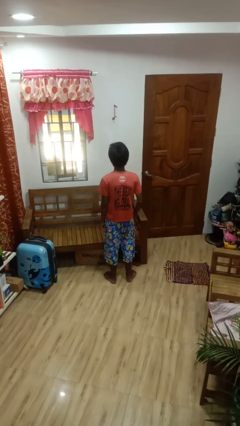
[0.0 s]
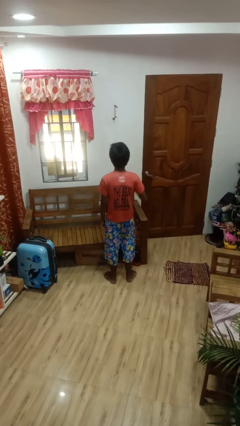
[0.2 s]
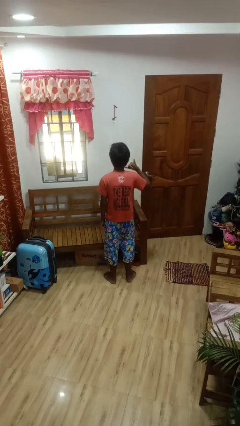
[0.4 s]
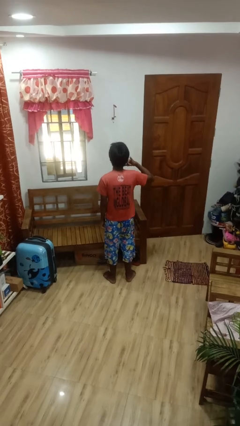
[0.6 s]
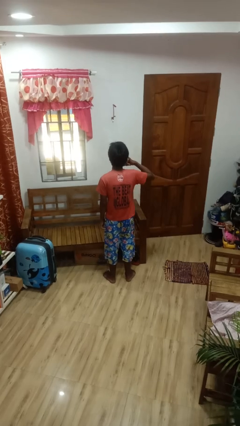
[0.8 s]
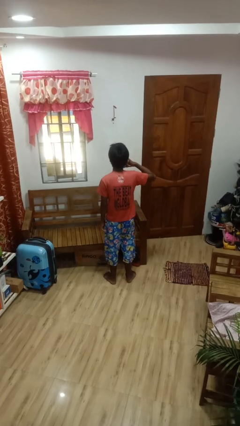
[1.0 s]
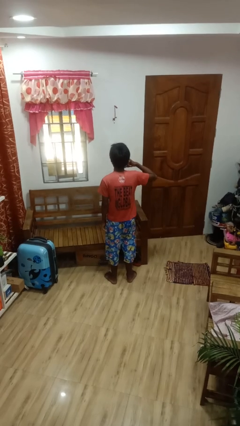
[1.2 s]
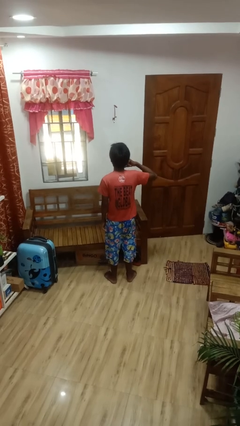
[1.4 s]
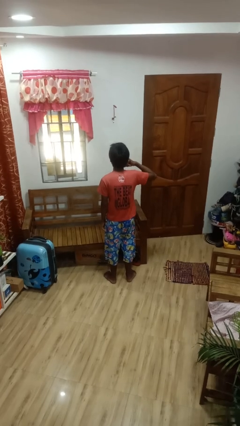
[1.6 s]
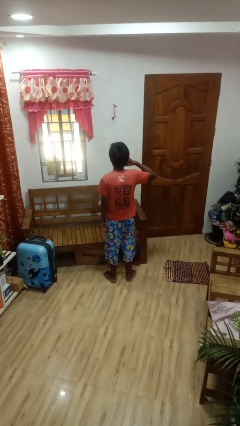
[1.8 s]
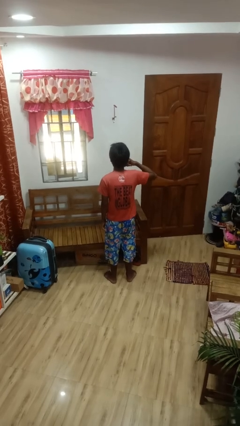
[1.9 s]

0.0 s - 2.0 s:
person gestures call me

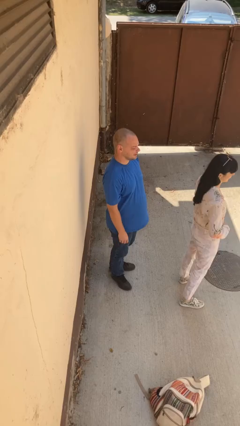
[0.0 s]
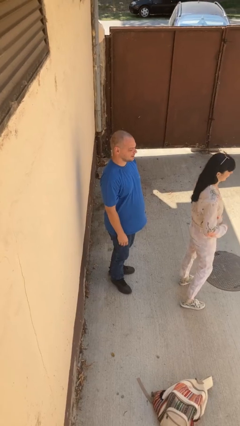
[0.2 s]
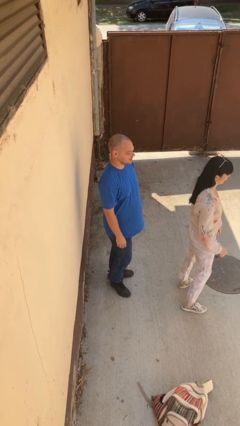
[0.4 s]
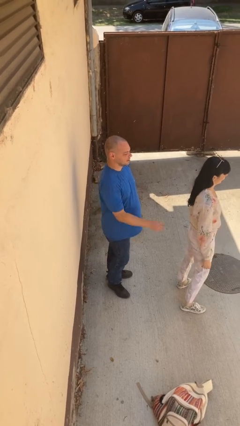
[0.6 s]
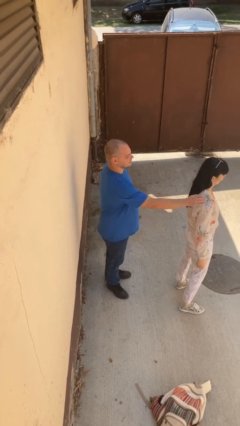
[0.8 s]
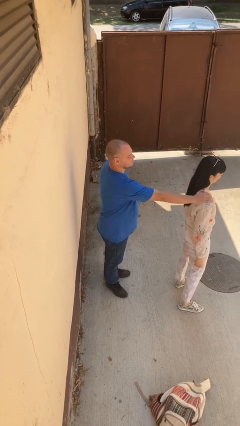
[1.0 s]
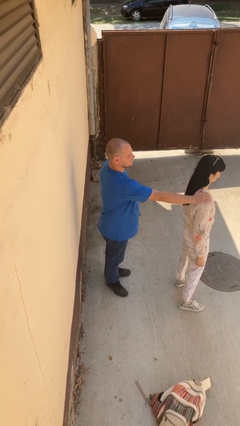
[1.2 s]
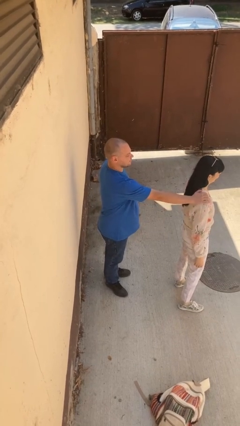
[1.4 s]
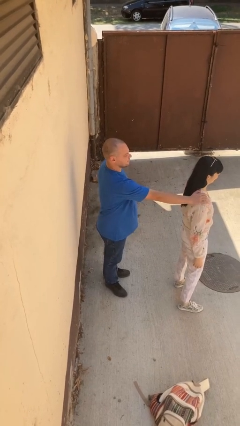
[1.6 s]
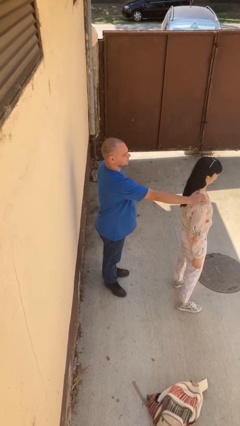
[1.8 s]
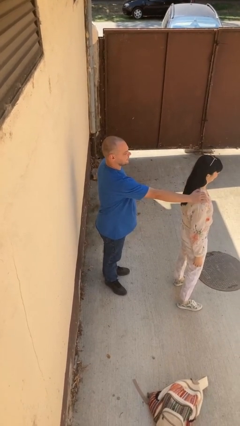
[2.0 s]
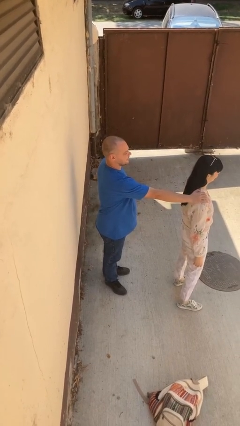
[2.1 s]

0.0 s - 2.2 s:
person grabs person by shoulder

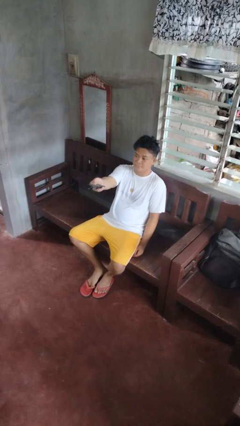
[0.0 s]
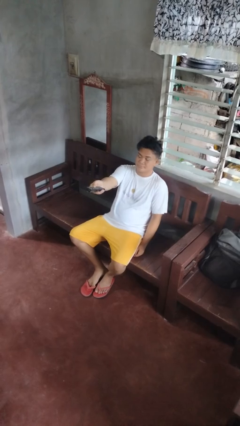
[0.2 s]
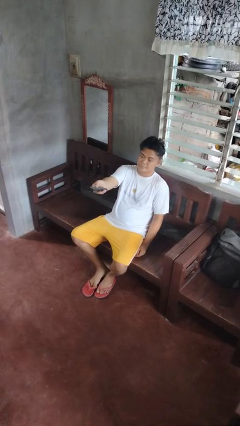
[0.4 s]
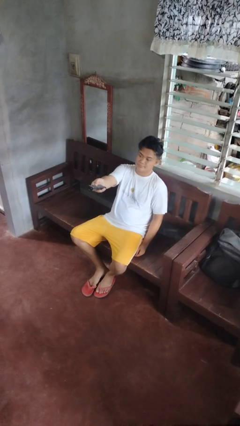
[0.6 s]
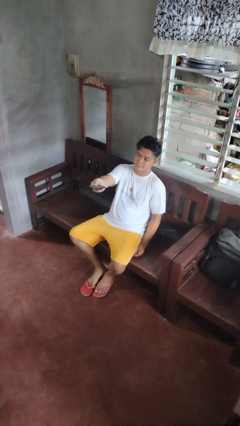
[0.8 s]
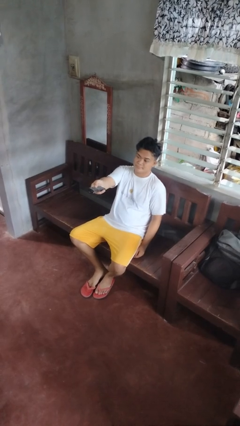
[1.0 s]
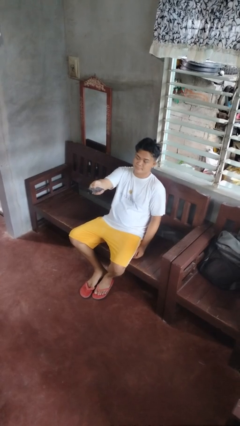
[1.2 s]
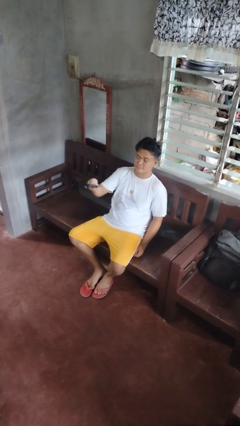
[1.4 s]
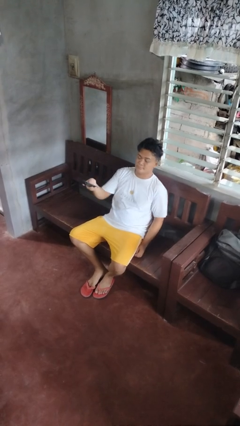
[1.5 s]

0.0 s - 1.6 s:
person uses television remote

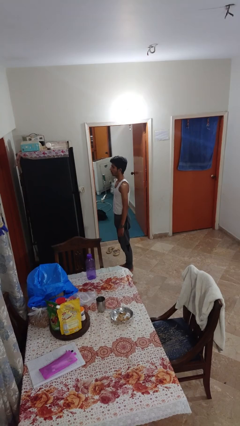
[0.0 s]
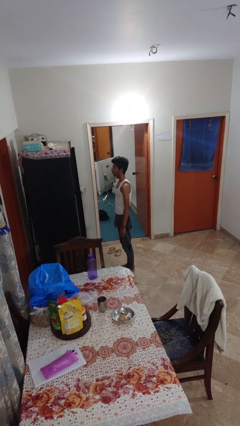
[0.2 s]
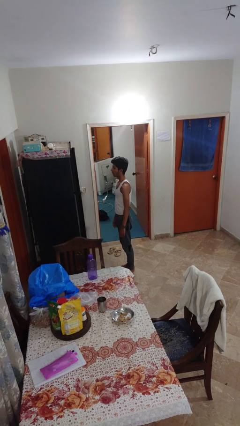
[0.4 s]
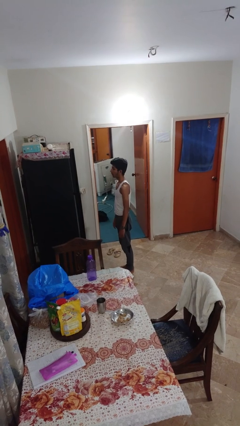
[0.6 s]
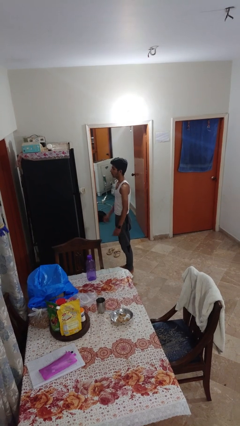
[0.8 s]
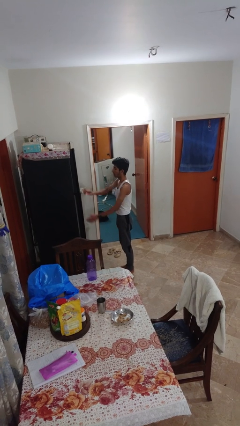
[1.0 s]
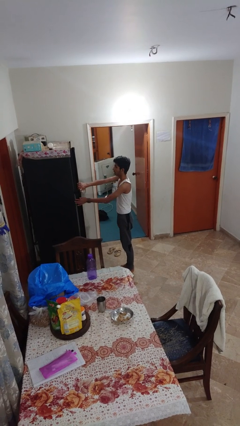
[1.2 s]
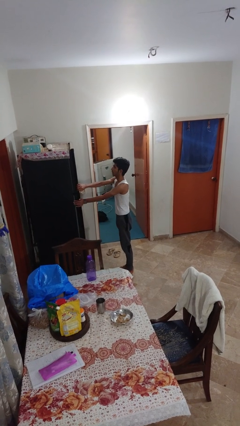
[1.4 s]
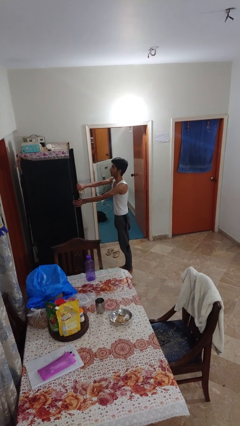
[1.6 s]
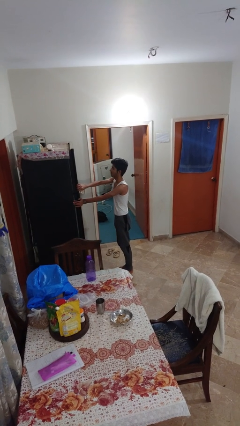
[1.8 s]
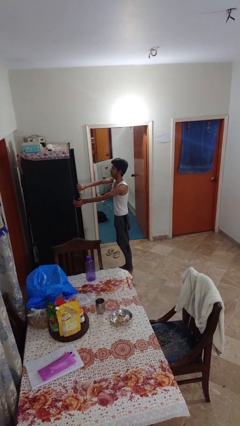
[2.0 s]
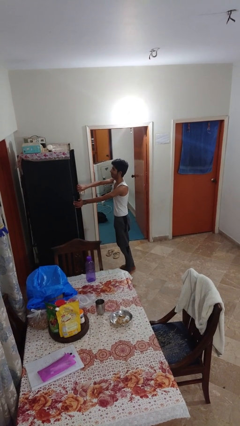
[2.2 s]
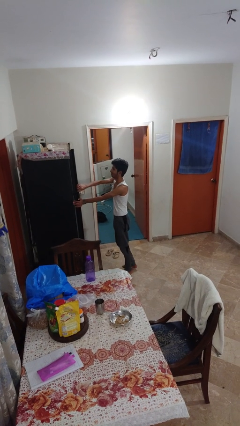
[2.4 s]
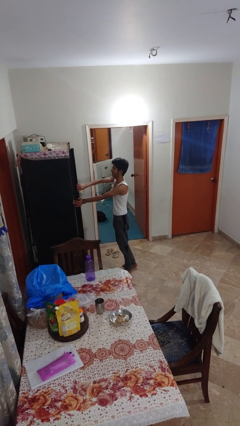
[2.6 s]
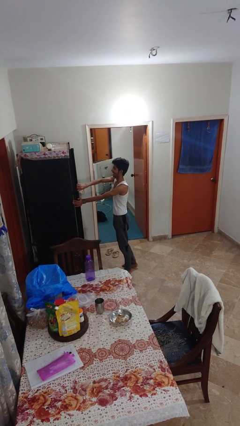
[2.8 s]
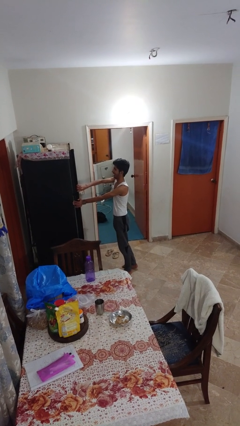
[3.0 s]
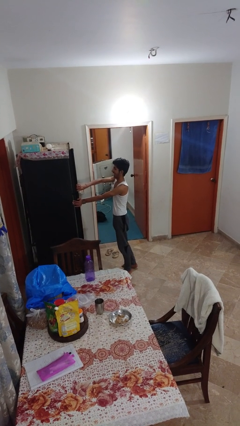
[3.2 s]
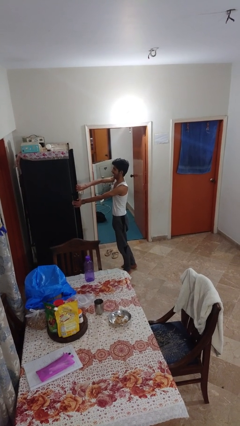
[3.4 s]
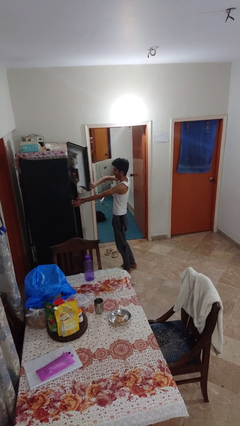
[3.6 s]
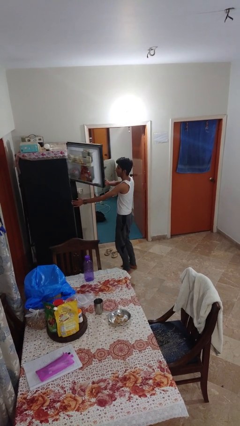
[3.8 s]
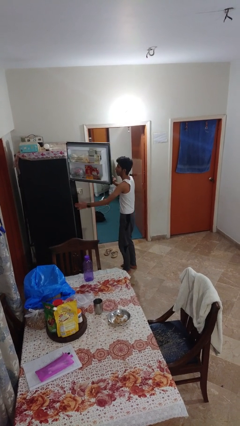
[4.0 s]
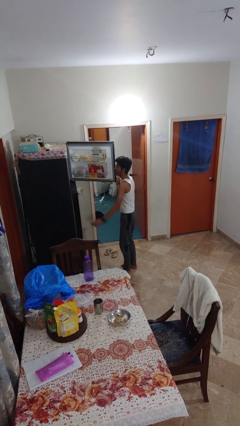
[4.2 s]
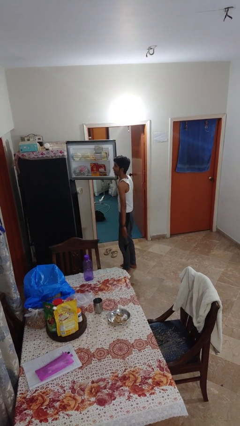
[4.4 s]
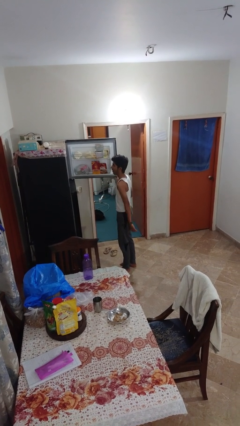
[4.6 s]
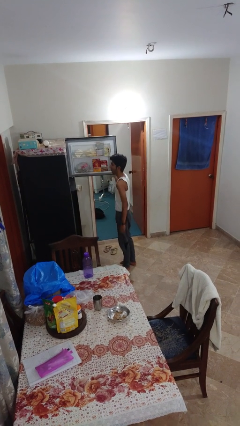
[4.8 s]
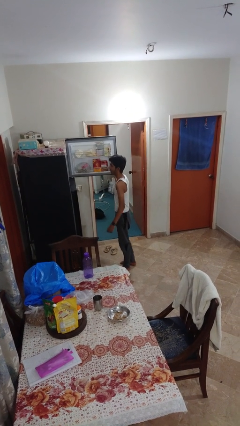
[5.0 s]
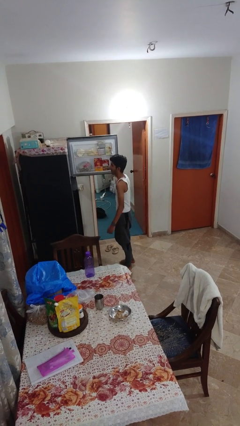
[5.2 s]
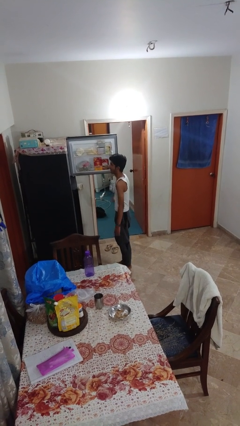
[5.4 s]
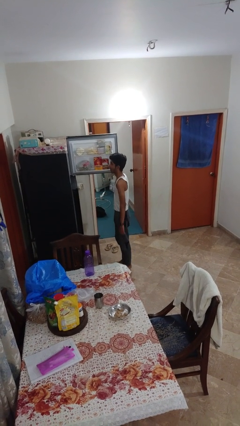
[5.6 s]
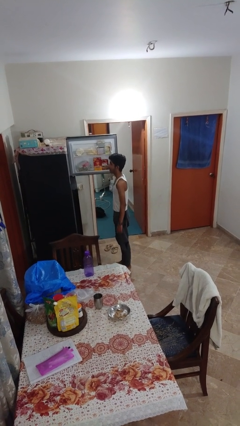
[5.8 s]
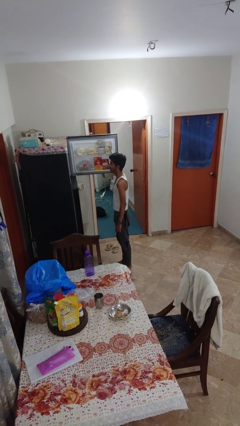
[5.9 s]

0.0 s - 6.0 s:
person opens refrigerator

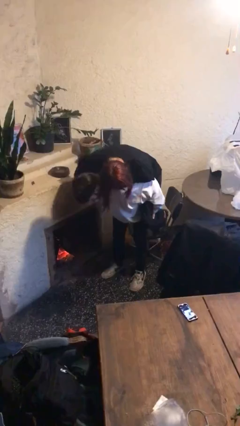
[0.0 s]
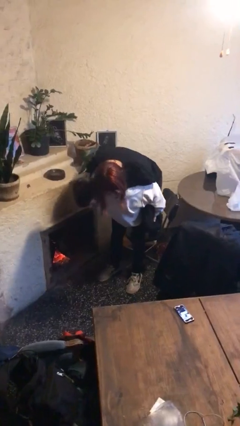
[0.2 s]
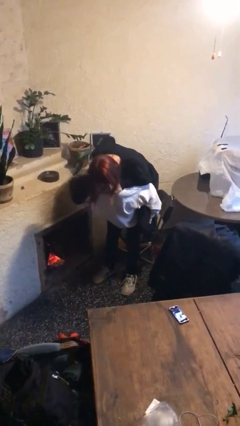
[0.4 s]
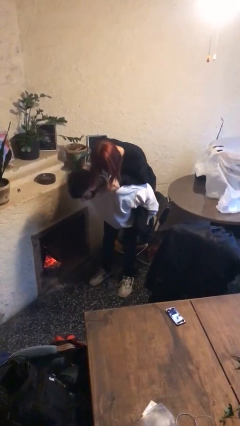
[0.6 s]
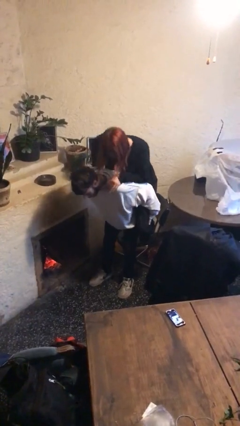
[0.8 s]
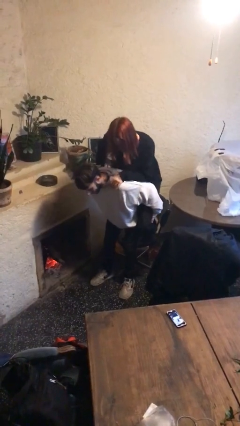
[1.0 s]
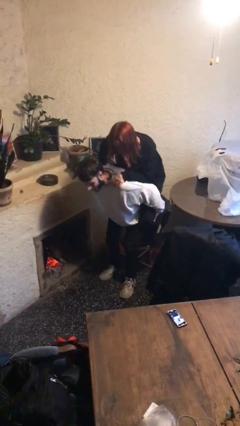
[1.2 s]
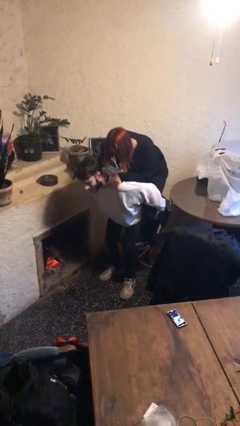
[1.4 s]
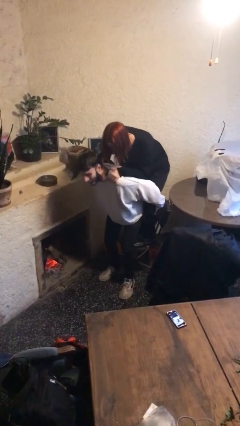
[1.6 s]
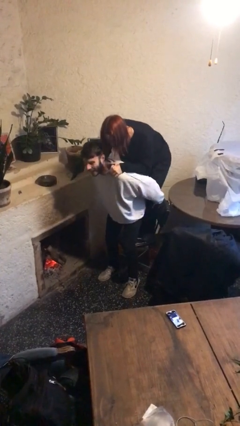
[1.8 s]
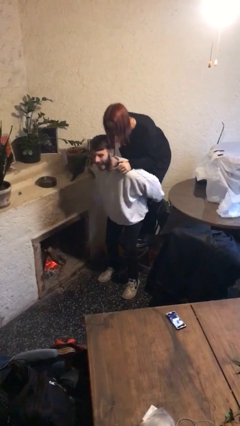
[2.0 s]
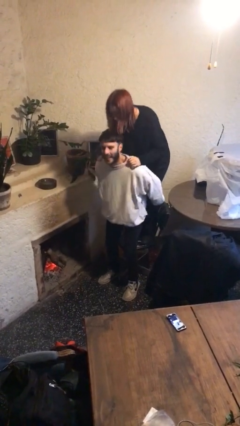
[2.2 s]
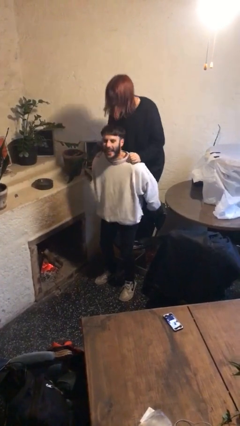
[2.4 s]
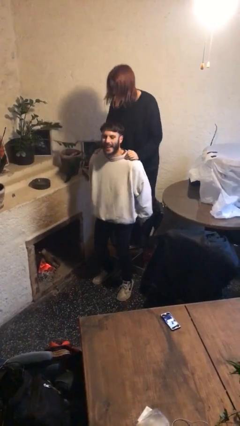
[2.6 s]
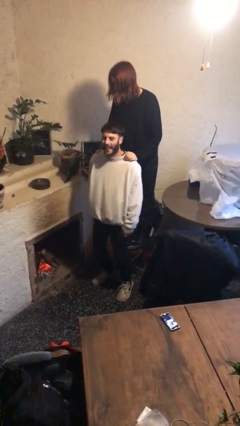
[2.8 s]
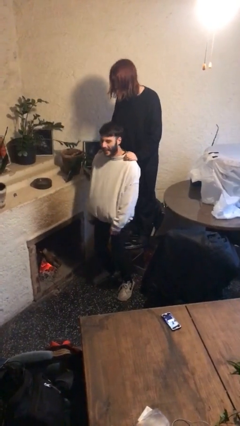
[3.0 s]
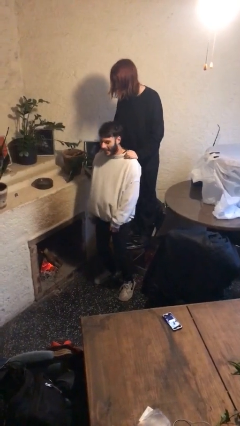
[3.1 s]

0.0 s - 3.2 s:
person puts down person

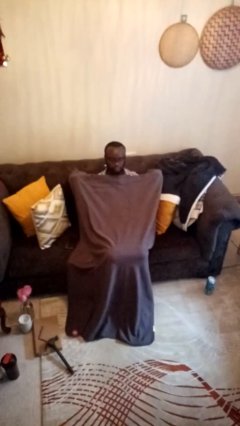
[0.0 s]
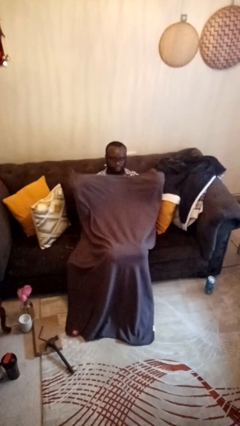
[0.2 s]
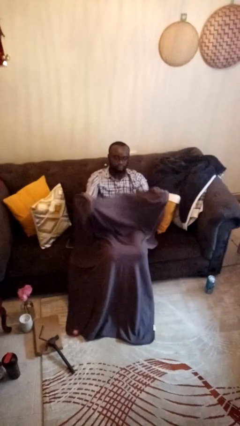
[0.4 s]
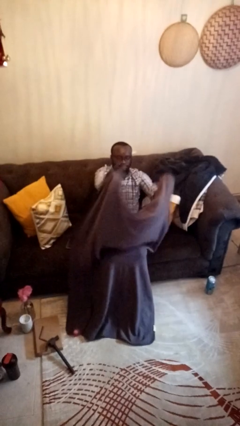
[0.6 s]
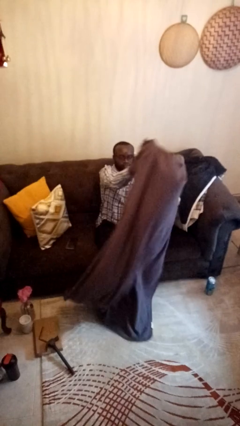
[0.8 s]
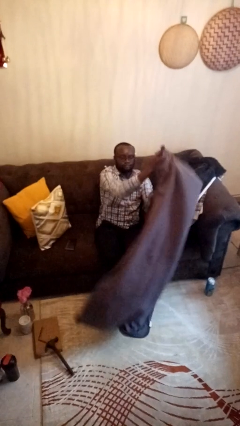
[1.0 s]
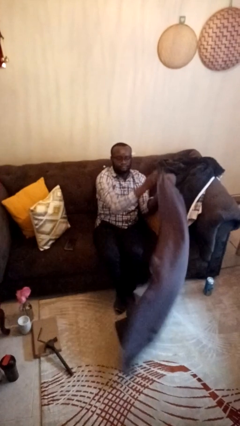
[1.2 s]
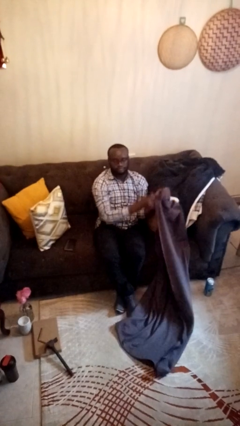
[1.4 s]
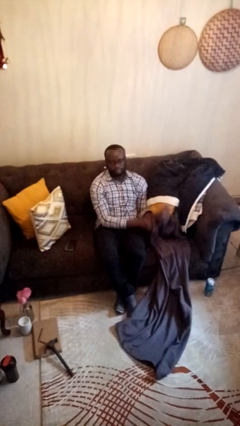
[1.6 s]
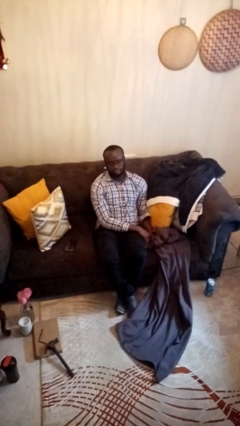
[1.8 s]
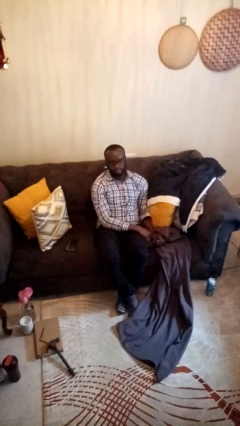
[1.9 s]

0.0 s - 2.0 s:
person uncovers with blanket

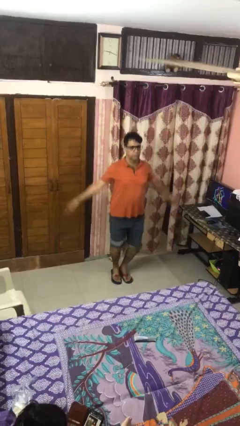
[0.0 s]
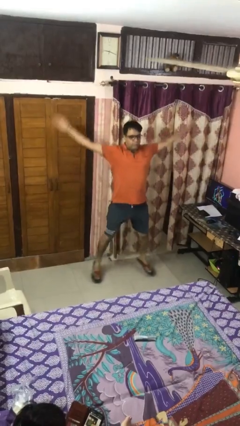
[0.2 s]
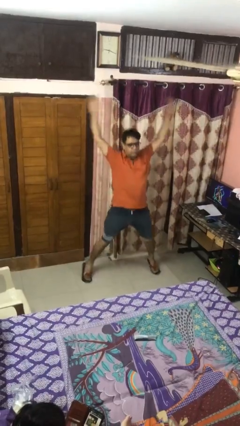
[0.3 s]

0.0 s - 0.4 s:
person exercises with jumping jacks
